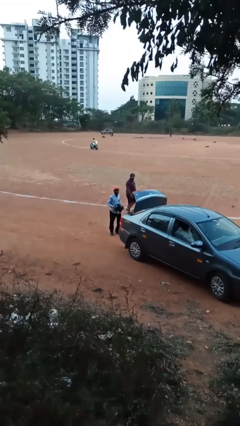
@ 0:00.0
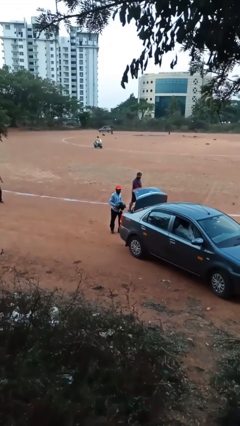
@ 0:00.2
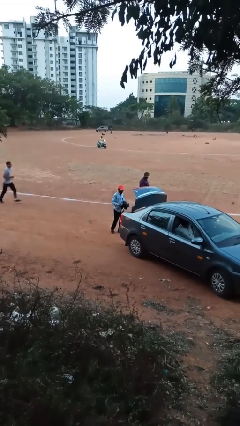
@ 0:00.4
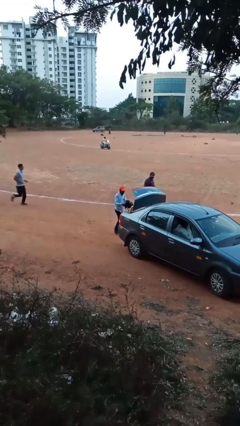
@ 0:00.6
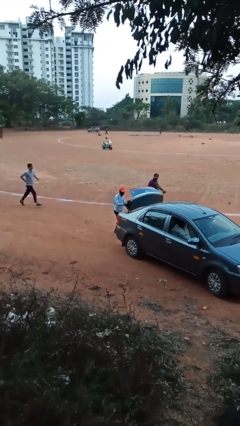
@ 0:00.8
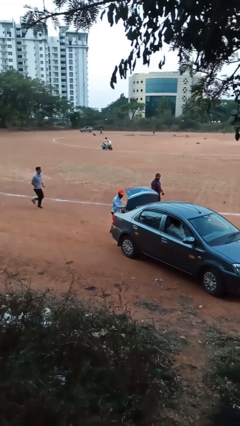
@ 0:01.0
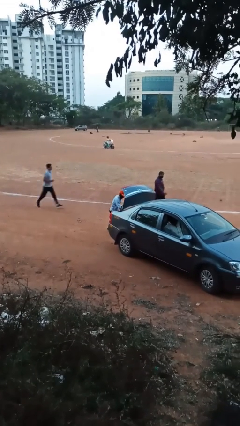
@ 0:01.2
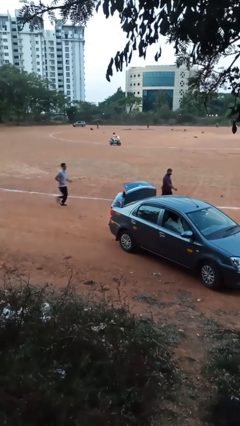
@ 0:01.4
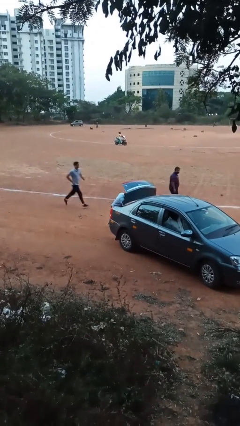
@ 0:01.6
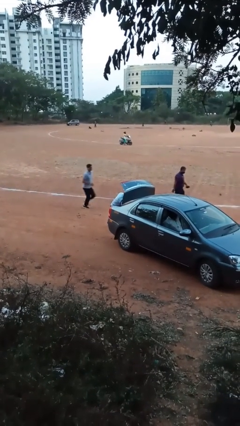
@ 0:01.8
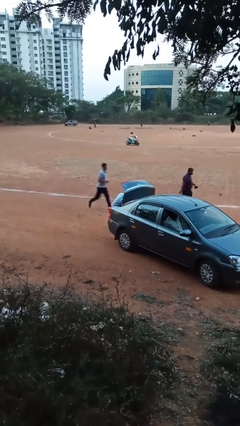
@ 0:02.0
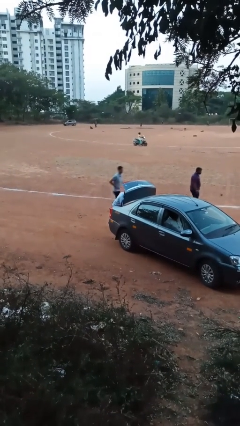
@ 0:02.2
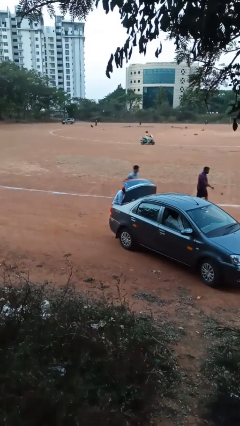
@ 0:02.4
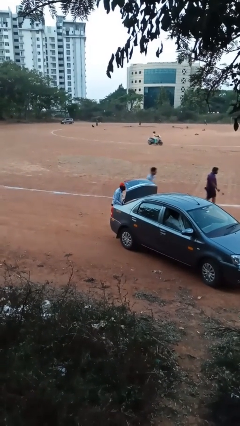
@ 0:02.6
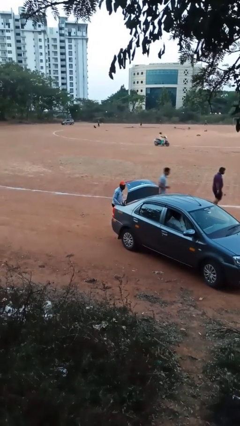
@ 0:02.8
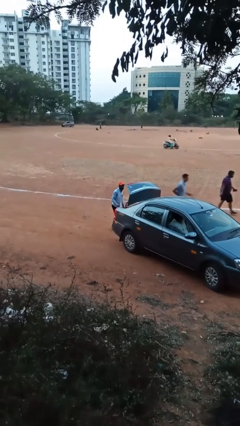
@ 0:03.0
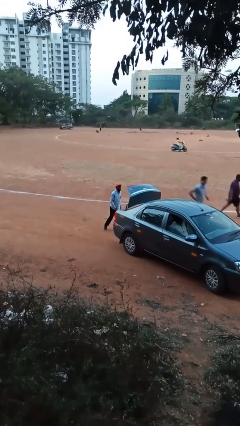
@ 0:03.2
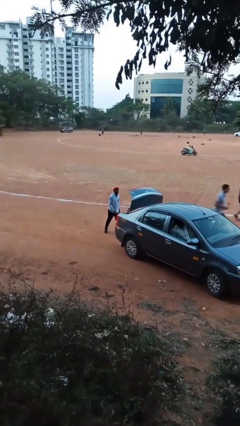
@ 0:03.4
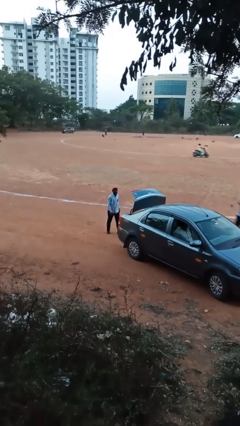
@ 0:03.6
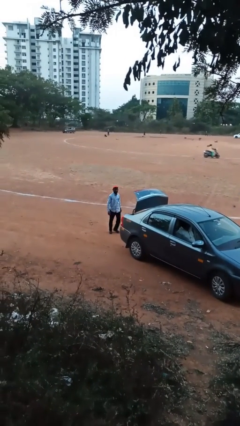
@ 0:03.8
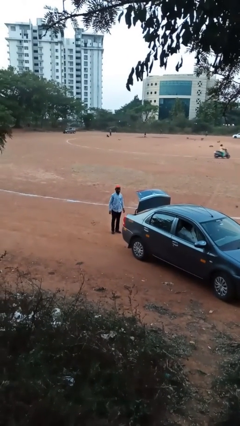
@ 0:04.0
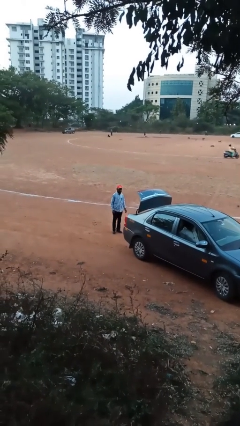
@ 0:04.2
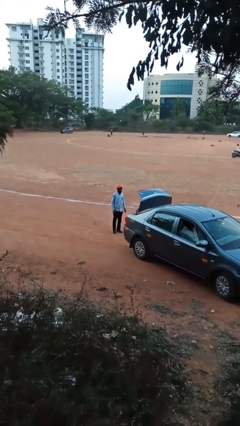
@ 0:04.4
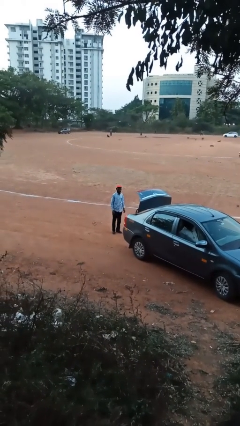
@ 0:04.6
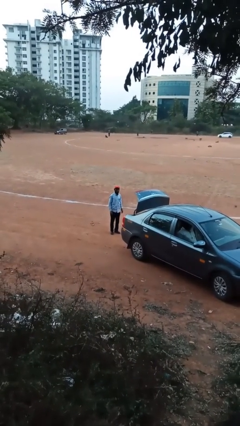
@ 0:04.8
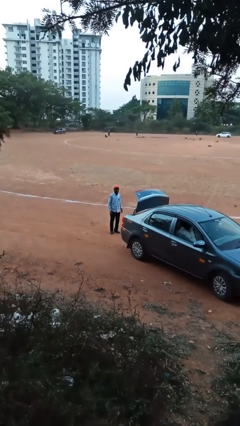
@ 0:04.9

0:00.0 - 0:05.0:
person loads car

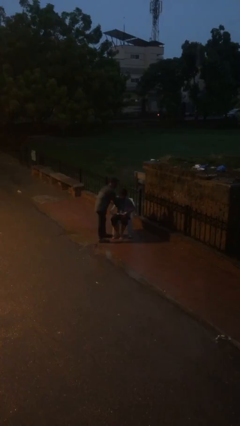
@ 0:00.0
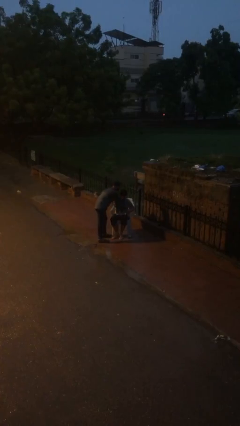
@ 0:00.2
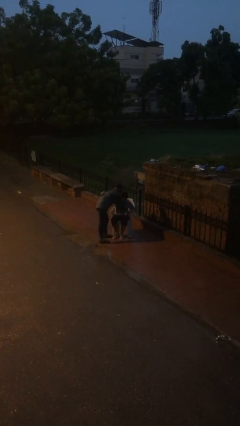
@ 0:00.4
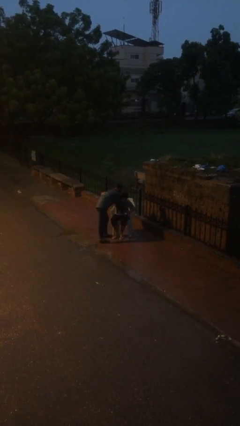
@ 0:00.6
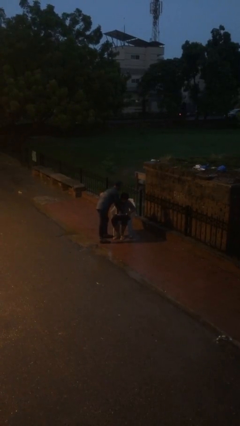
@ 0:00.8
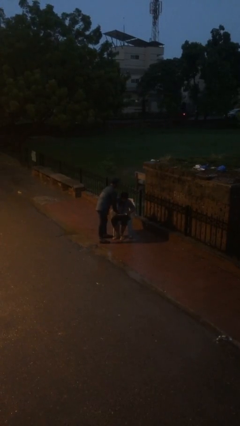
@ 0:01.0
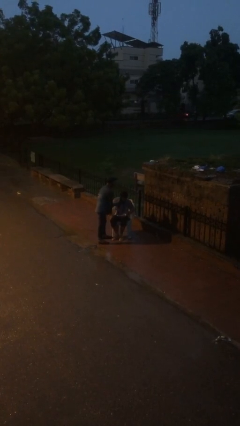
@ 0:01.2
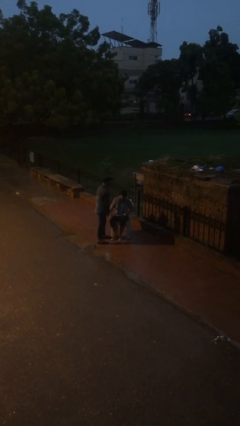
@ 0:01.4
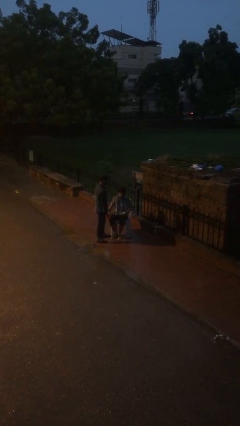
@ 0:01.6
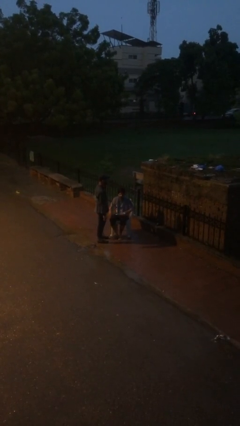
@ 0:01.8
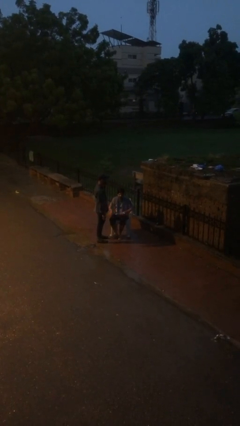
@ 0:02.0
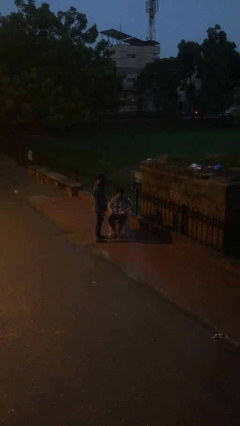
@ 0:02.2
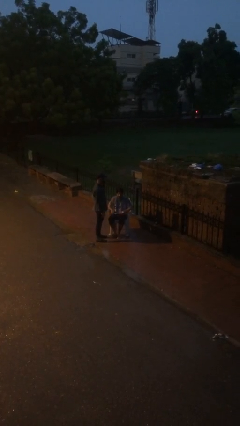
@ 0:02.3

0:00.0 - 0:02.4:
person embraces person

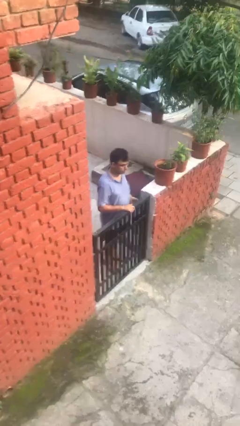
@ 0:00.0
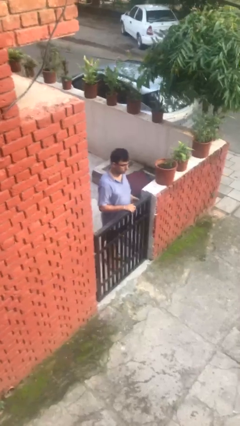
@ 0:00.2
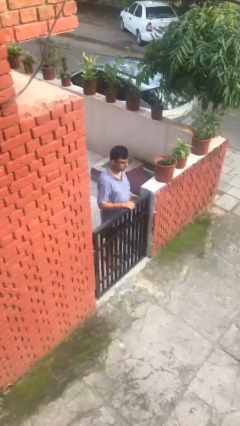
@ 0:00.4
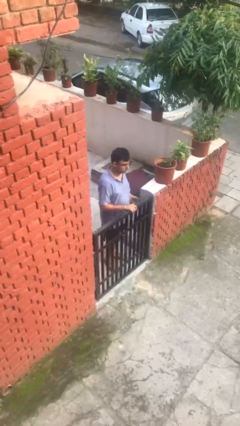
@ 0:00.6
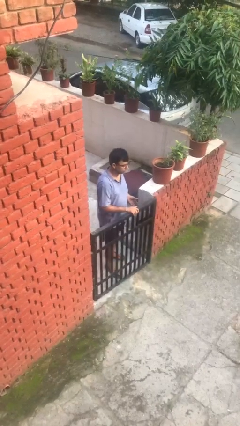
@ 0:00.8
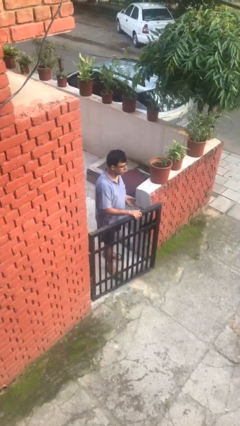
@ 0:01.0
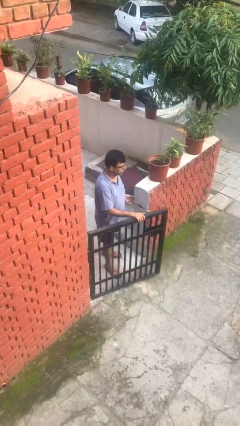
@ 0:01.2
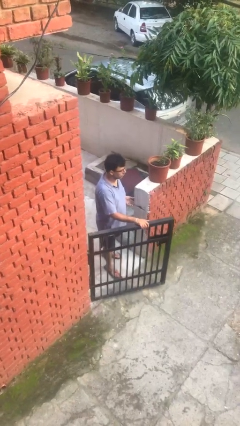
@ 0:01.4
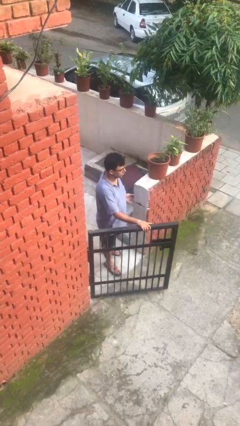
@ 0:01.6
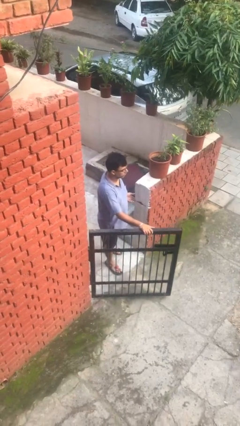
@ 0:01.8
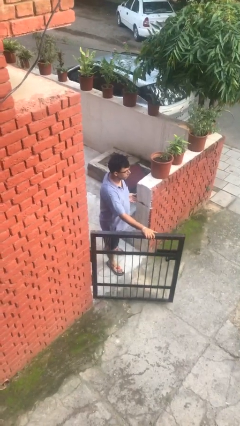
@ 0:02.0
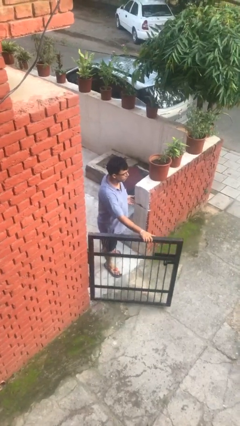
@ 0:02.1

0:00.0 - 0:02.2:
person opens gate

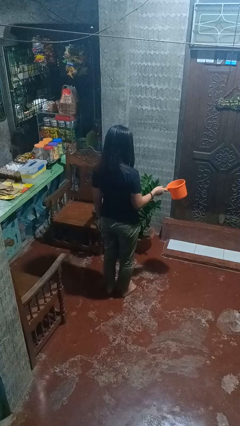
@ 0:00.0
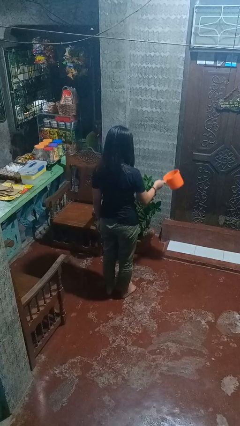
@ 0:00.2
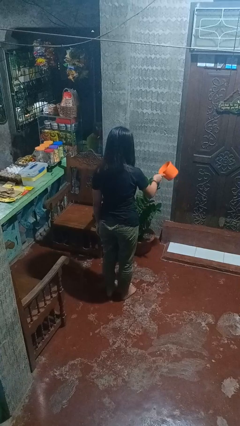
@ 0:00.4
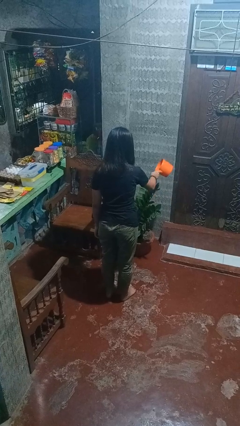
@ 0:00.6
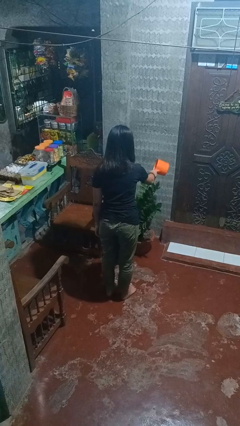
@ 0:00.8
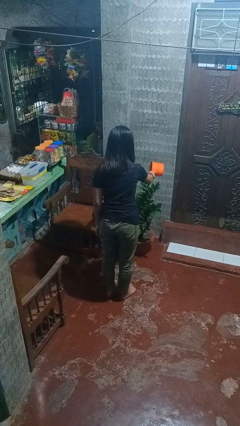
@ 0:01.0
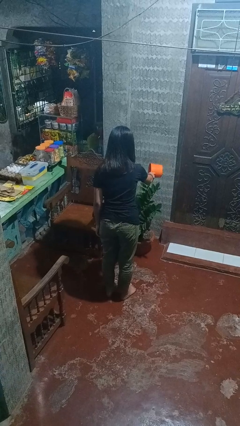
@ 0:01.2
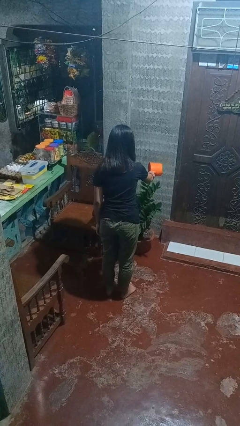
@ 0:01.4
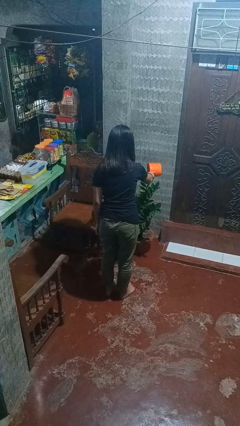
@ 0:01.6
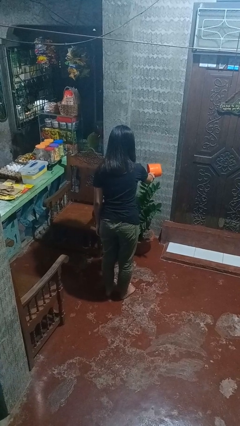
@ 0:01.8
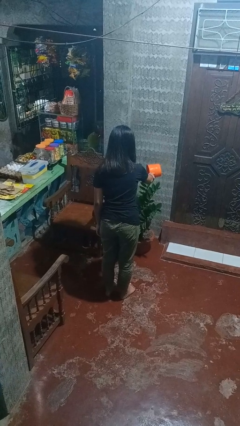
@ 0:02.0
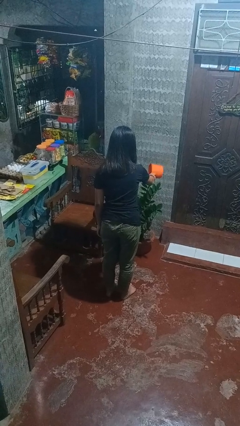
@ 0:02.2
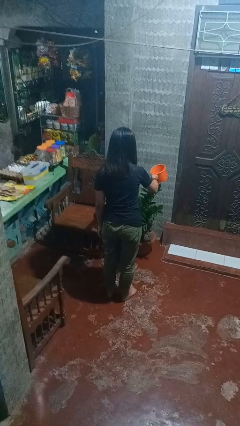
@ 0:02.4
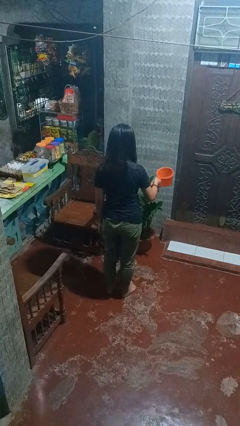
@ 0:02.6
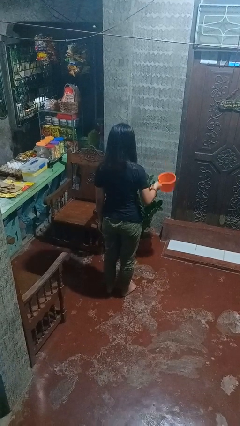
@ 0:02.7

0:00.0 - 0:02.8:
person waters houseplant

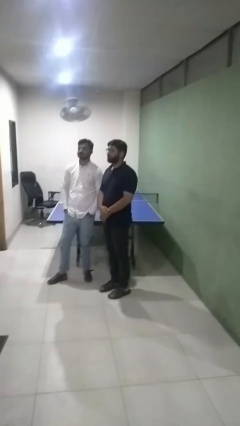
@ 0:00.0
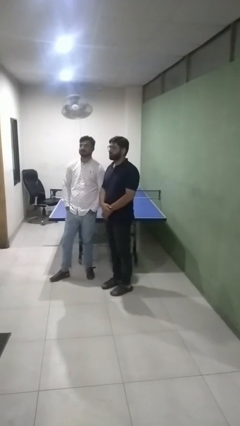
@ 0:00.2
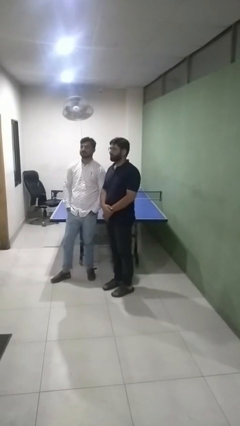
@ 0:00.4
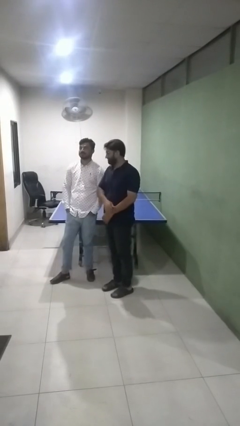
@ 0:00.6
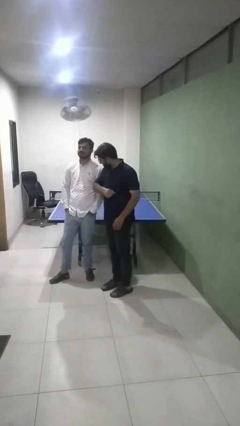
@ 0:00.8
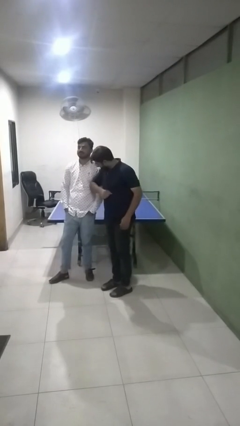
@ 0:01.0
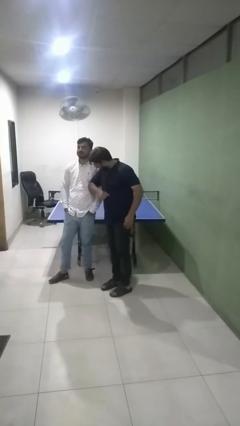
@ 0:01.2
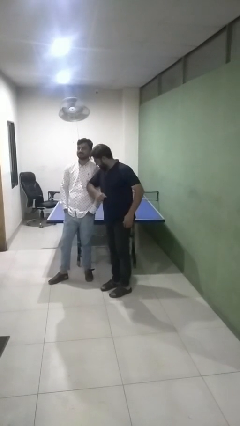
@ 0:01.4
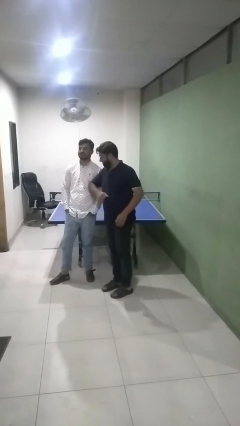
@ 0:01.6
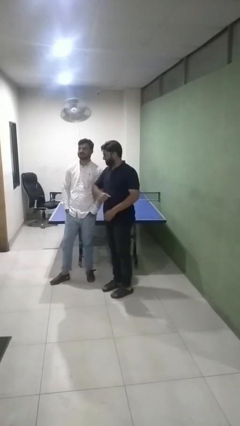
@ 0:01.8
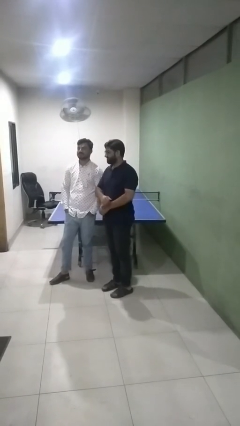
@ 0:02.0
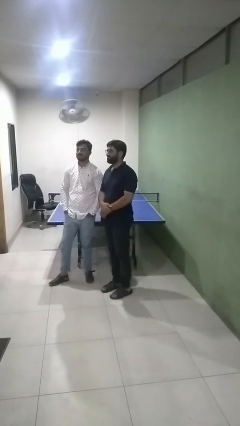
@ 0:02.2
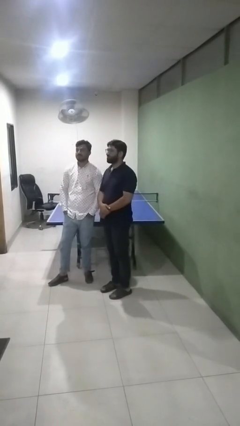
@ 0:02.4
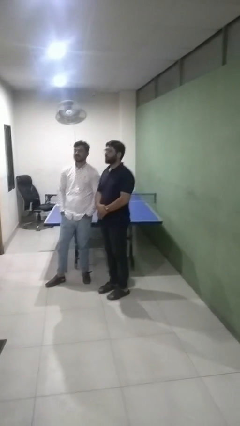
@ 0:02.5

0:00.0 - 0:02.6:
person nudges person with elbow

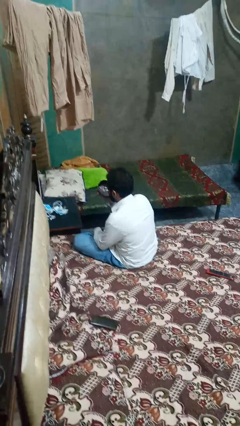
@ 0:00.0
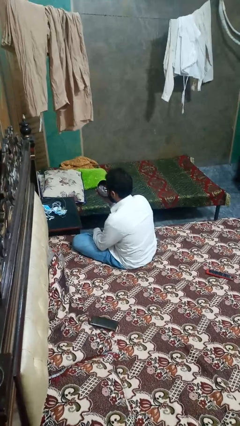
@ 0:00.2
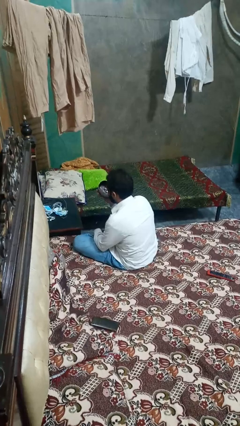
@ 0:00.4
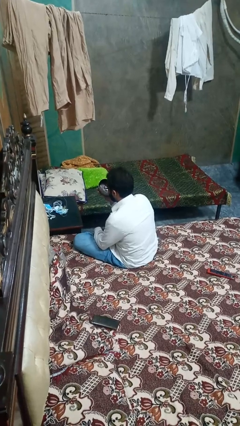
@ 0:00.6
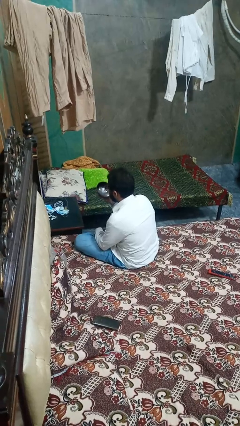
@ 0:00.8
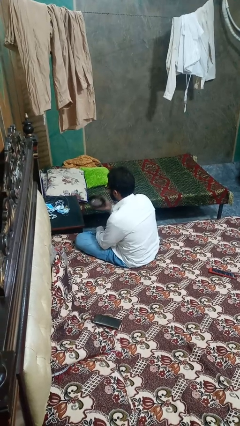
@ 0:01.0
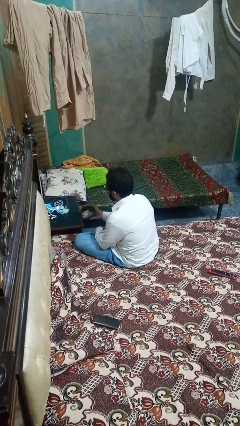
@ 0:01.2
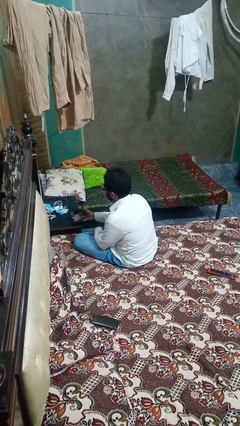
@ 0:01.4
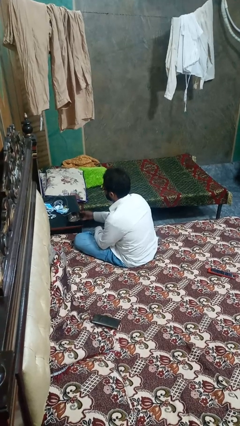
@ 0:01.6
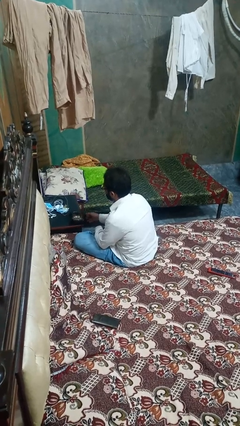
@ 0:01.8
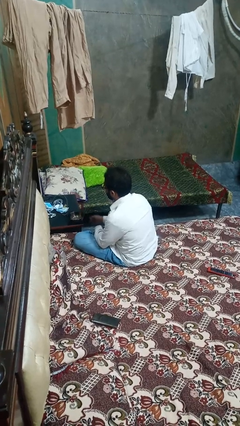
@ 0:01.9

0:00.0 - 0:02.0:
person puts down object on table
